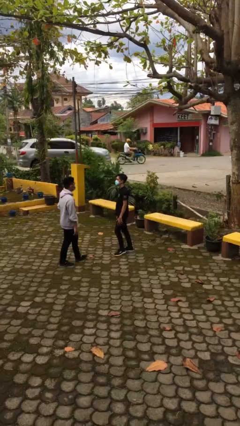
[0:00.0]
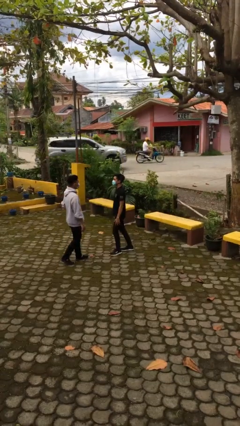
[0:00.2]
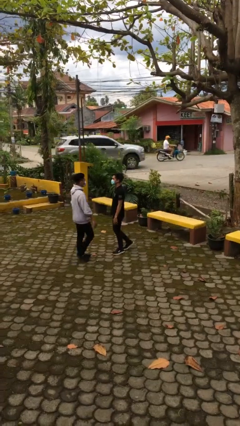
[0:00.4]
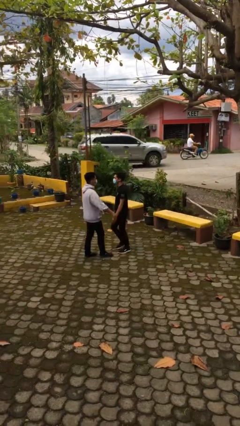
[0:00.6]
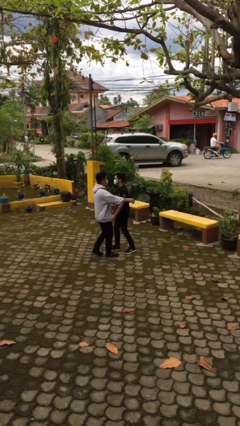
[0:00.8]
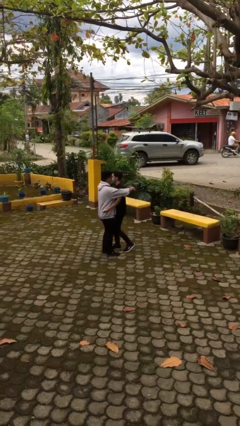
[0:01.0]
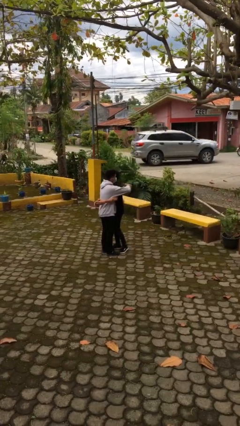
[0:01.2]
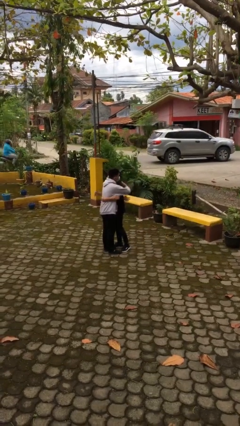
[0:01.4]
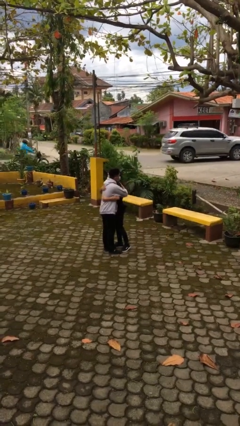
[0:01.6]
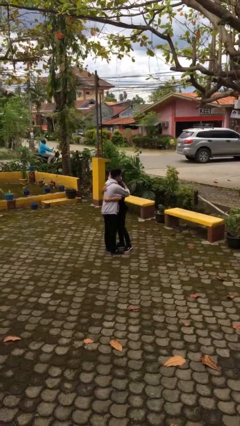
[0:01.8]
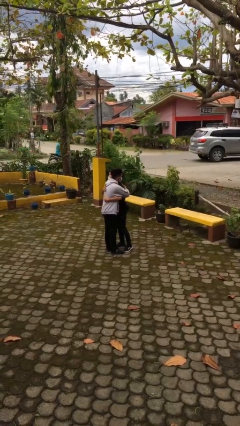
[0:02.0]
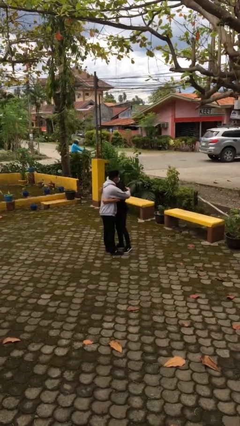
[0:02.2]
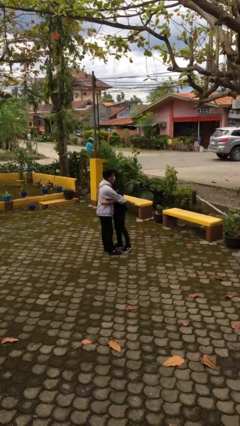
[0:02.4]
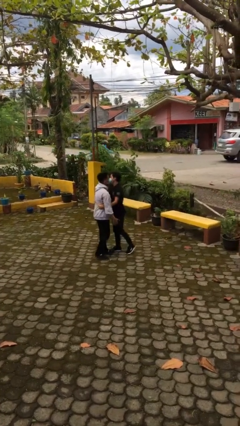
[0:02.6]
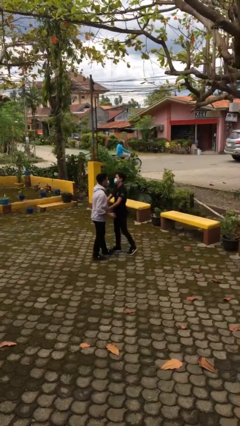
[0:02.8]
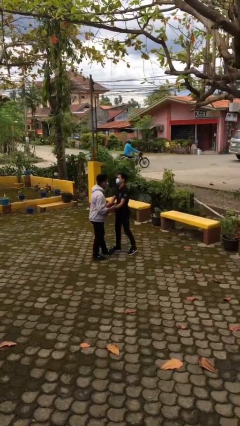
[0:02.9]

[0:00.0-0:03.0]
person embraces person

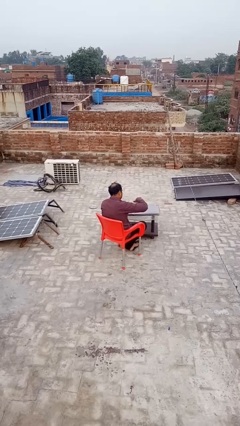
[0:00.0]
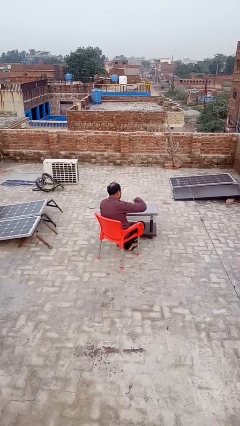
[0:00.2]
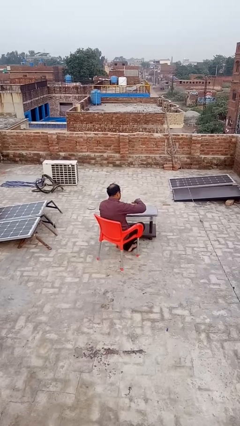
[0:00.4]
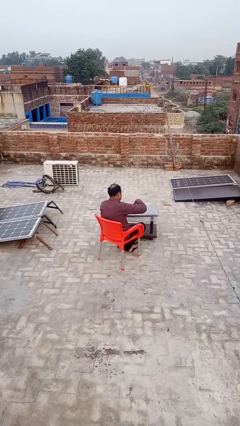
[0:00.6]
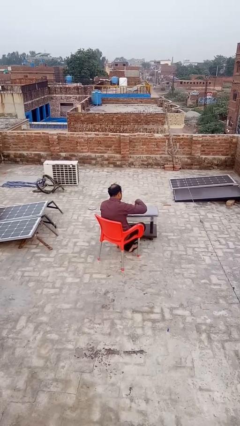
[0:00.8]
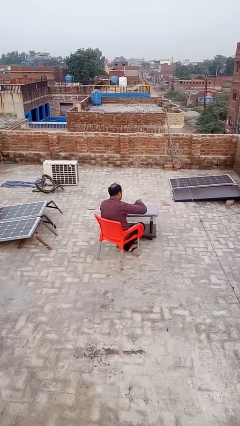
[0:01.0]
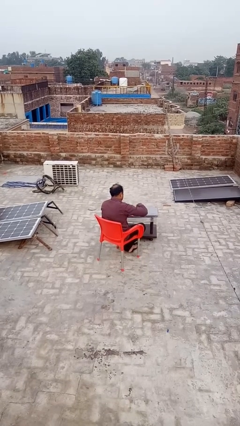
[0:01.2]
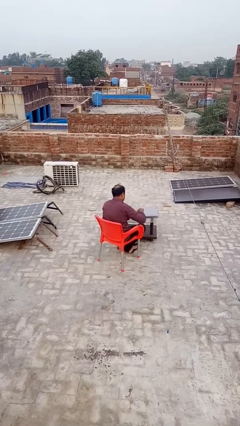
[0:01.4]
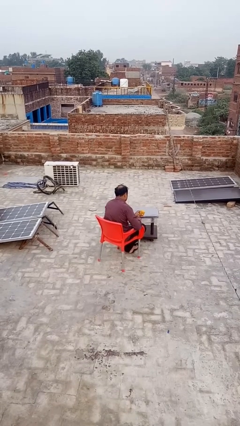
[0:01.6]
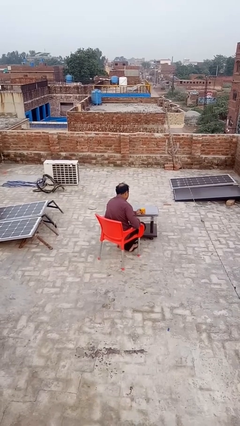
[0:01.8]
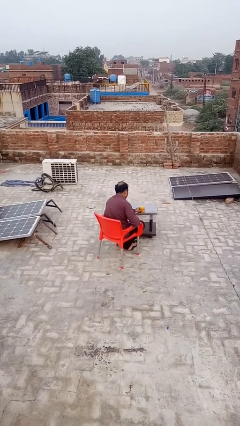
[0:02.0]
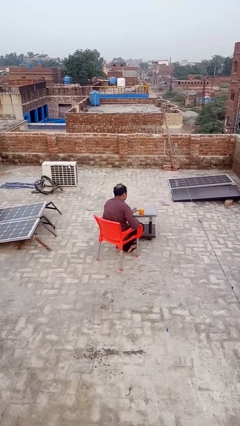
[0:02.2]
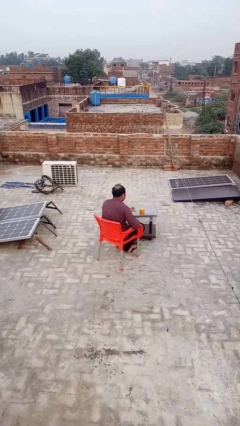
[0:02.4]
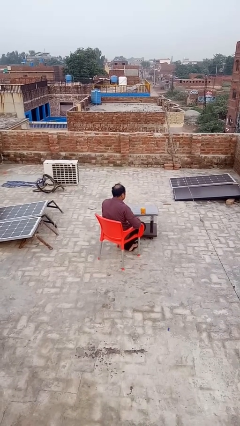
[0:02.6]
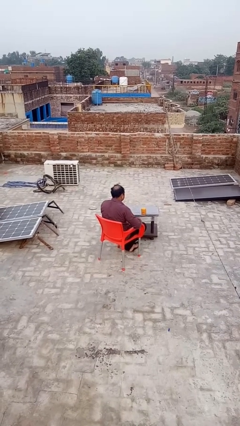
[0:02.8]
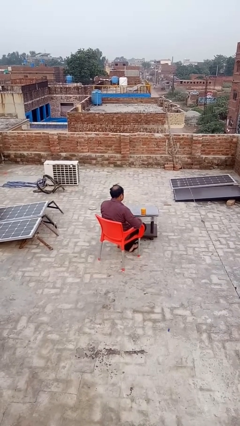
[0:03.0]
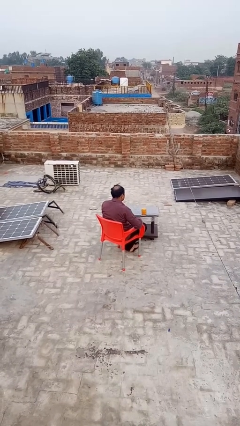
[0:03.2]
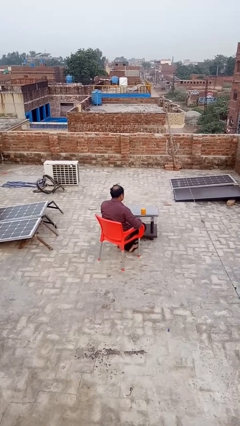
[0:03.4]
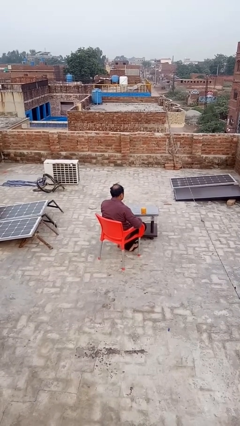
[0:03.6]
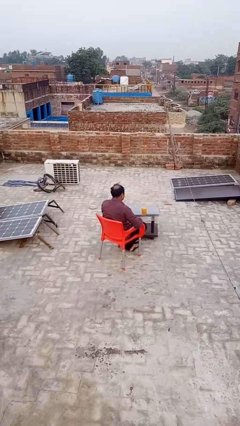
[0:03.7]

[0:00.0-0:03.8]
person closes jar

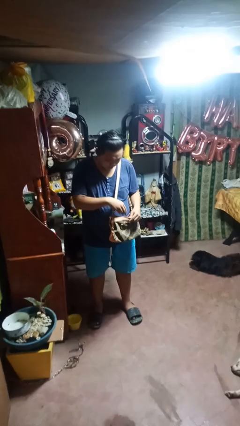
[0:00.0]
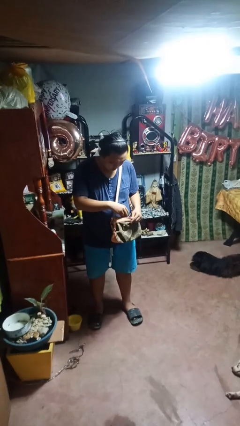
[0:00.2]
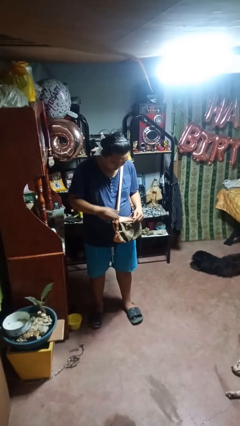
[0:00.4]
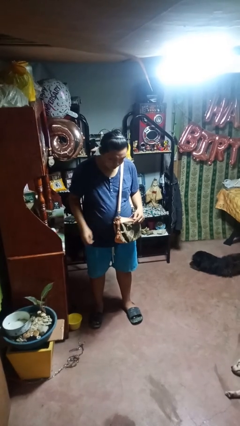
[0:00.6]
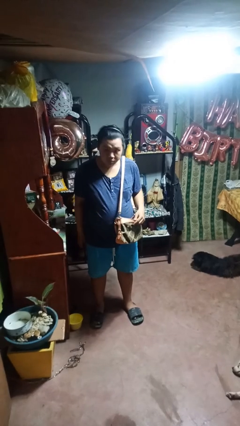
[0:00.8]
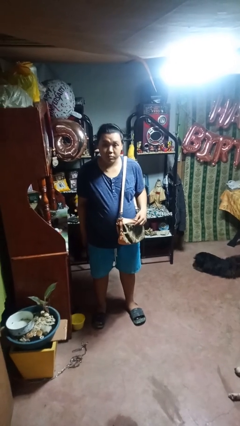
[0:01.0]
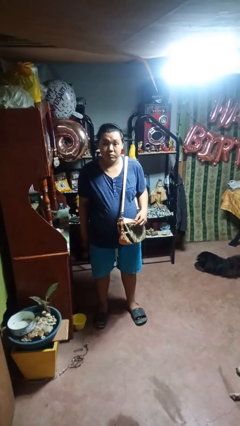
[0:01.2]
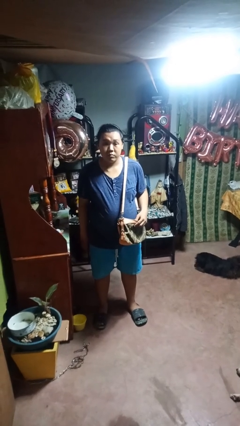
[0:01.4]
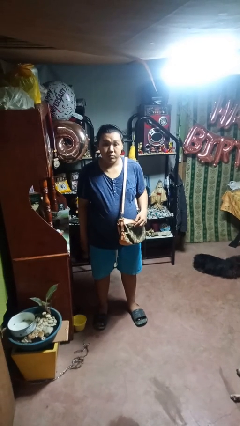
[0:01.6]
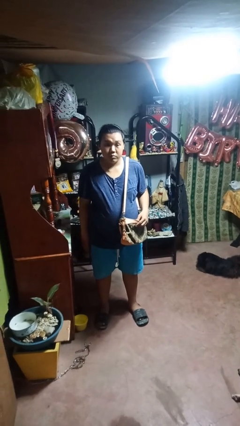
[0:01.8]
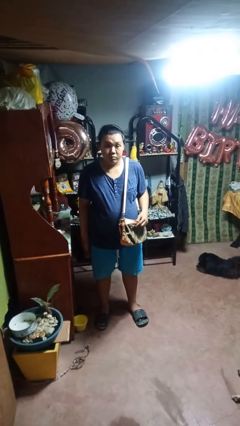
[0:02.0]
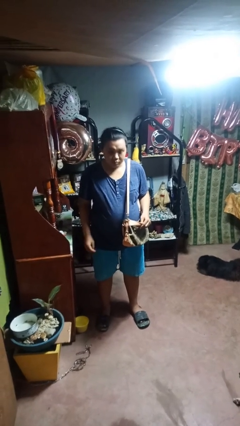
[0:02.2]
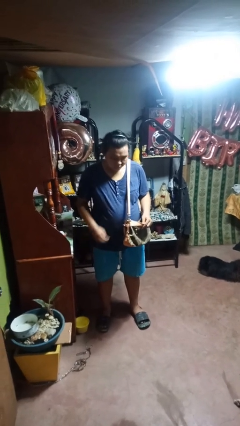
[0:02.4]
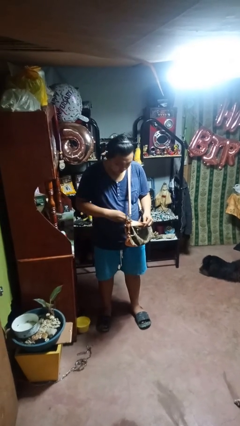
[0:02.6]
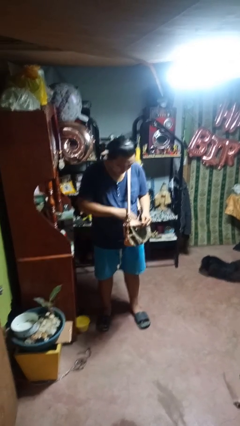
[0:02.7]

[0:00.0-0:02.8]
person puts object into purse

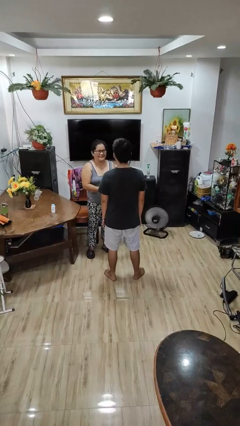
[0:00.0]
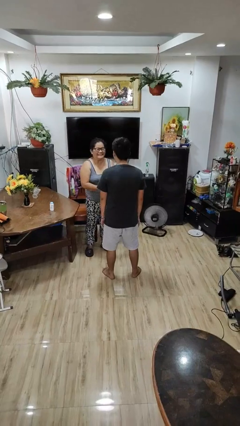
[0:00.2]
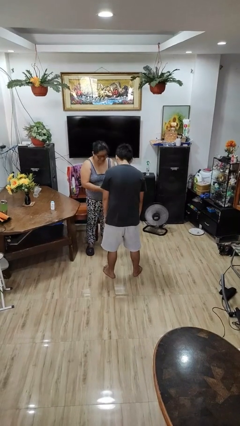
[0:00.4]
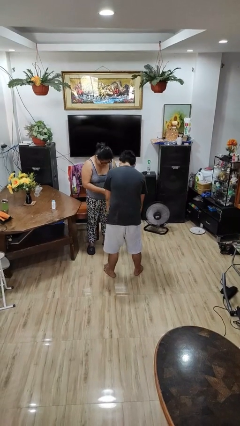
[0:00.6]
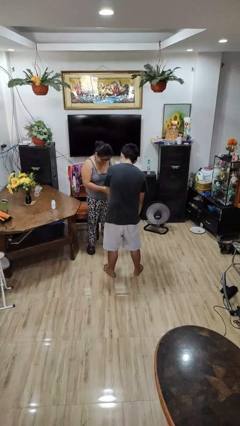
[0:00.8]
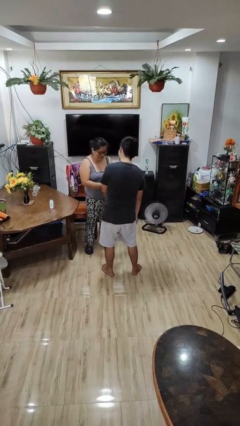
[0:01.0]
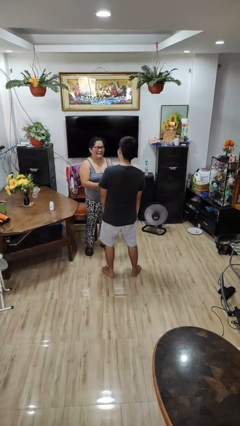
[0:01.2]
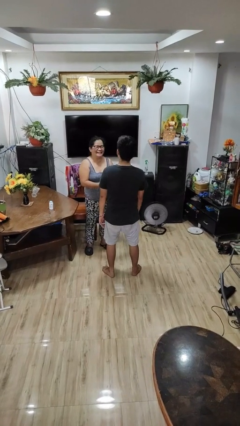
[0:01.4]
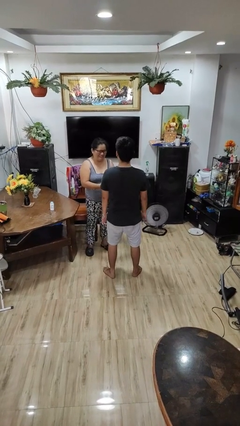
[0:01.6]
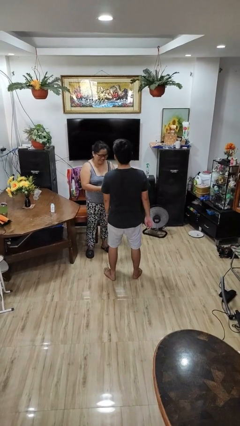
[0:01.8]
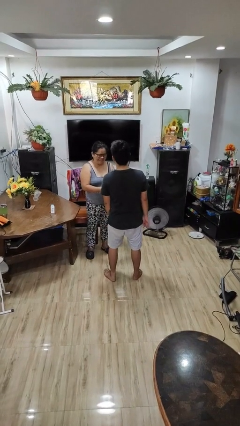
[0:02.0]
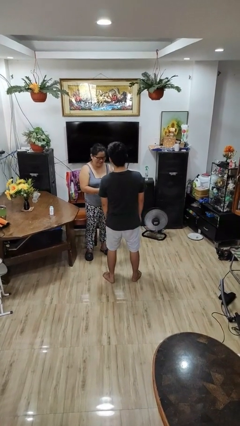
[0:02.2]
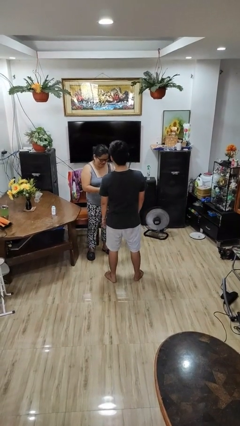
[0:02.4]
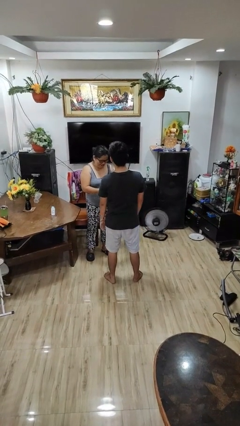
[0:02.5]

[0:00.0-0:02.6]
person laughs with person

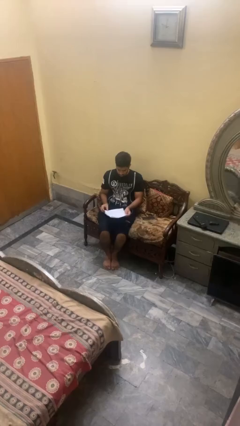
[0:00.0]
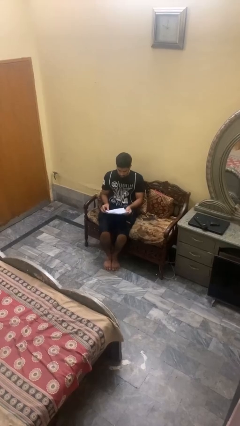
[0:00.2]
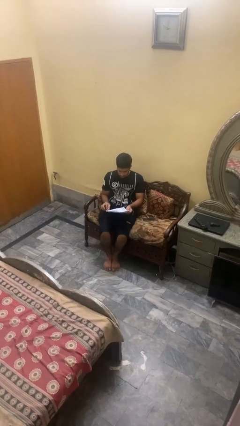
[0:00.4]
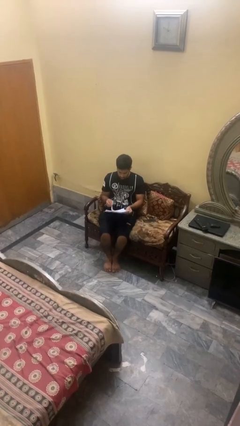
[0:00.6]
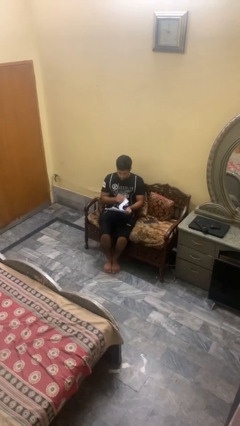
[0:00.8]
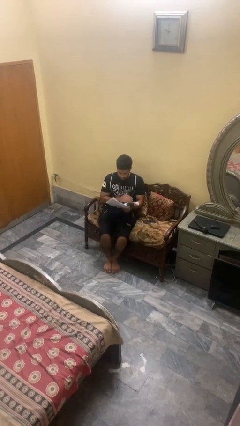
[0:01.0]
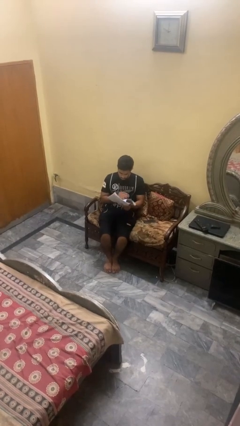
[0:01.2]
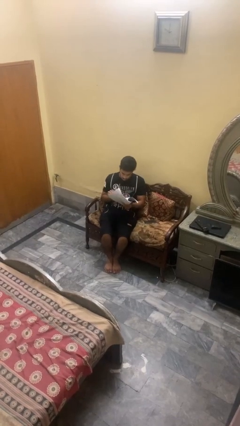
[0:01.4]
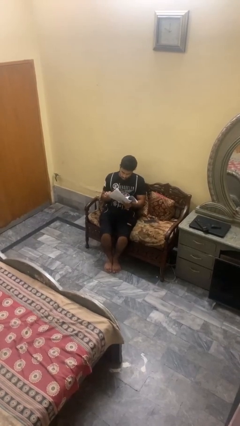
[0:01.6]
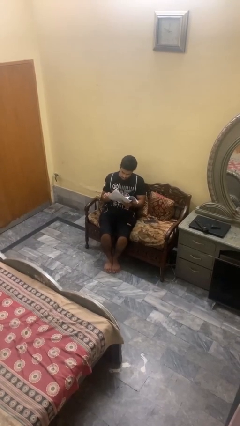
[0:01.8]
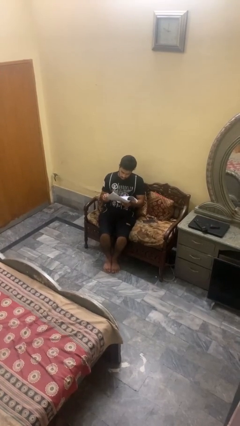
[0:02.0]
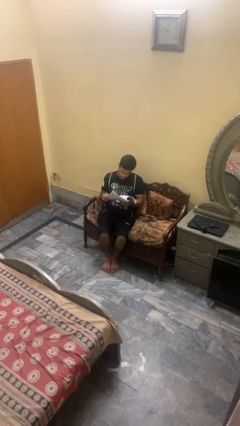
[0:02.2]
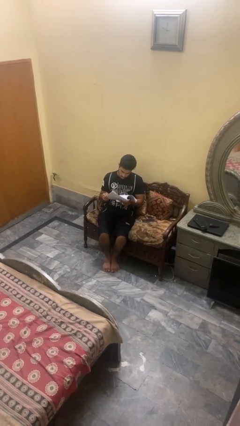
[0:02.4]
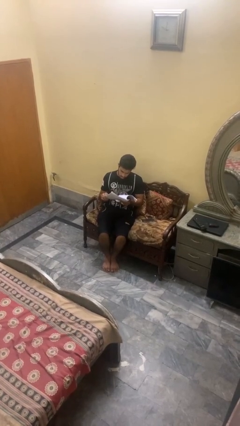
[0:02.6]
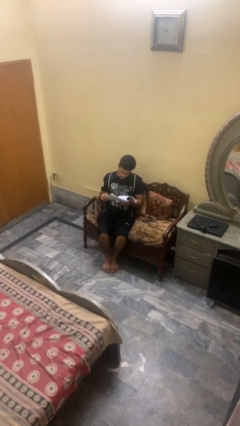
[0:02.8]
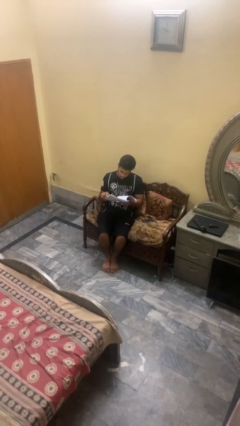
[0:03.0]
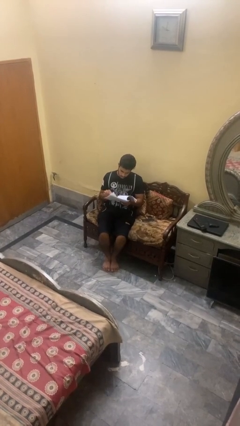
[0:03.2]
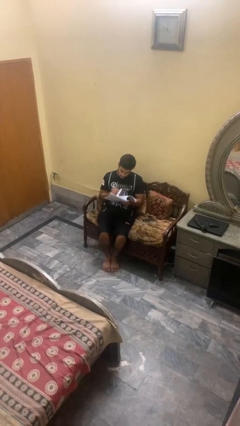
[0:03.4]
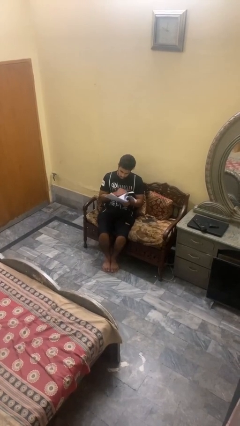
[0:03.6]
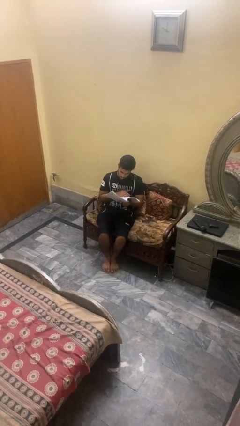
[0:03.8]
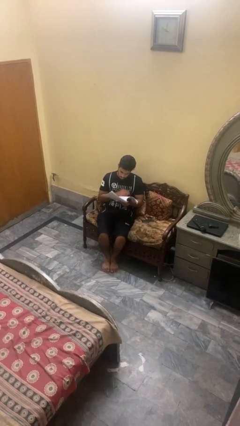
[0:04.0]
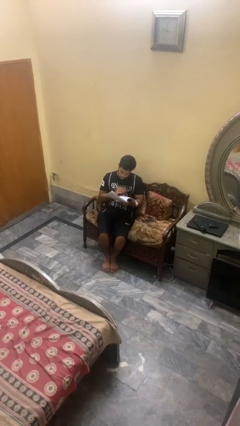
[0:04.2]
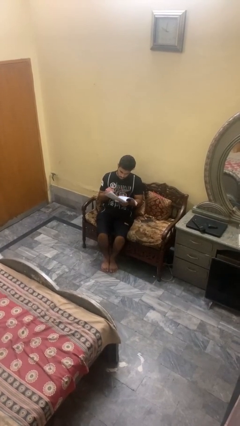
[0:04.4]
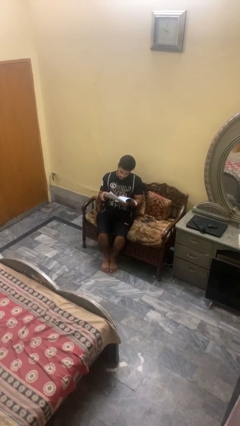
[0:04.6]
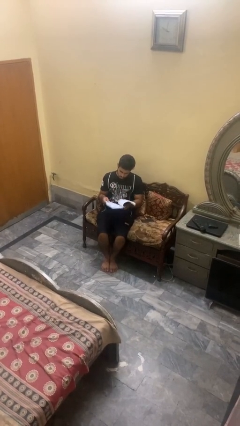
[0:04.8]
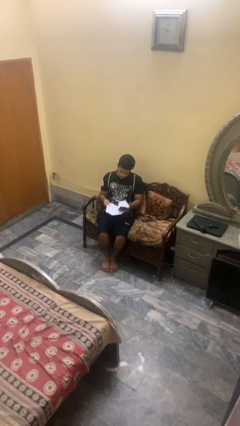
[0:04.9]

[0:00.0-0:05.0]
person reads magazine

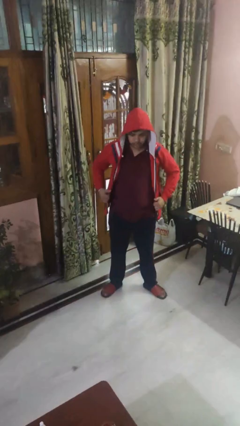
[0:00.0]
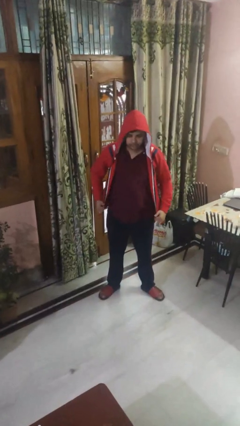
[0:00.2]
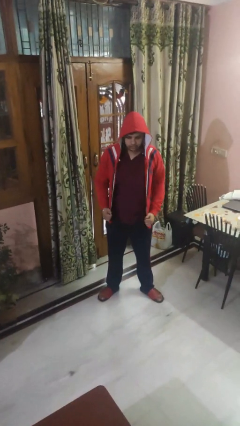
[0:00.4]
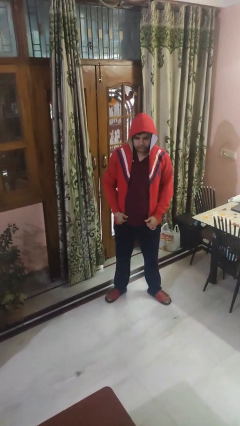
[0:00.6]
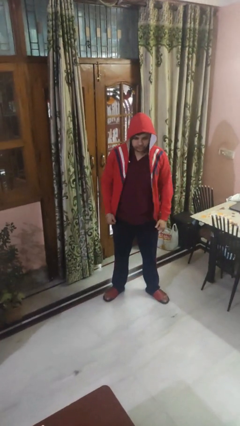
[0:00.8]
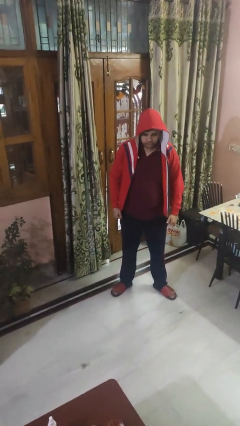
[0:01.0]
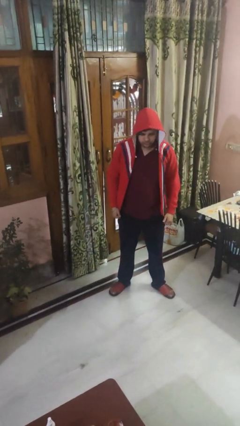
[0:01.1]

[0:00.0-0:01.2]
person puts on hoodie
